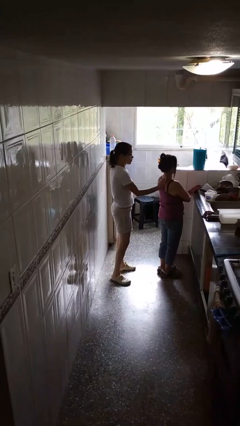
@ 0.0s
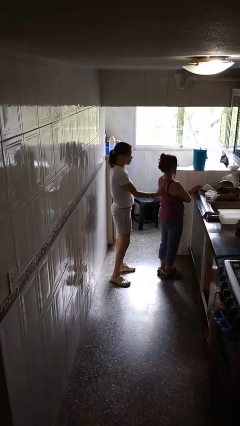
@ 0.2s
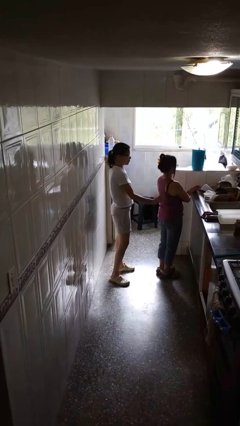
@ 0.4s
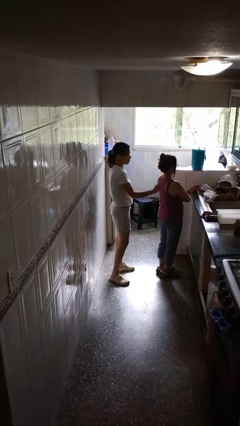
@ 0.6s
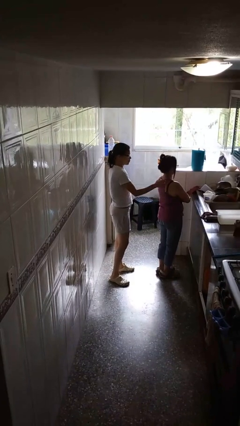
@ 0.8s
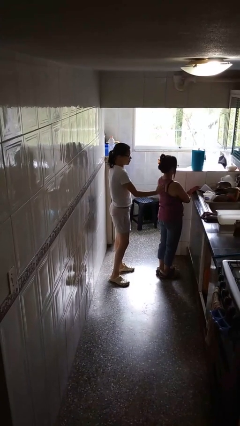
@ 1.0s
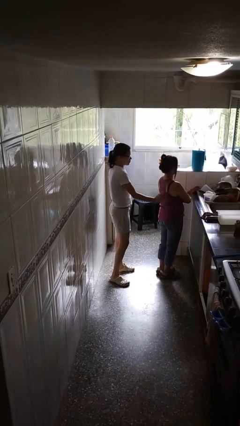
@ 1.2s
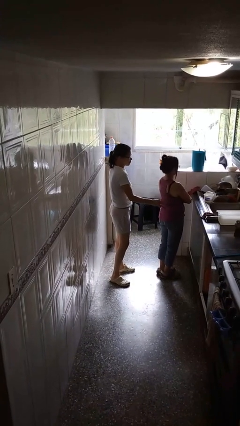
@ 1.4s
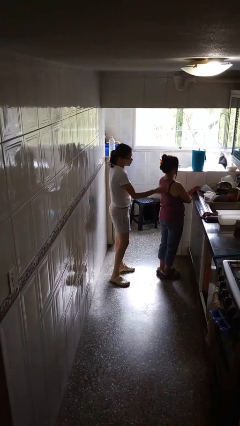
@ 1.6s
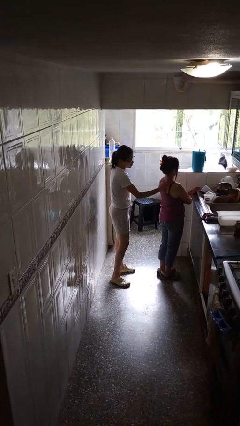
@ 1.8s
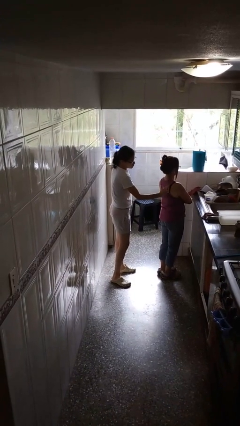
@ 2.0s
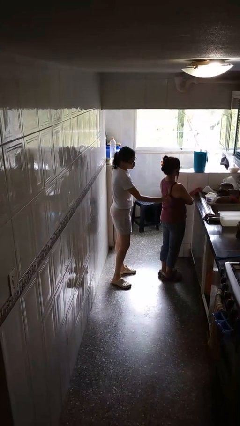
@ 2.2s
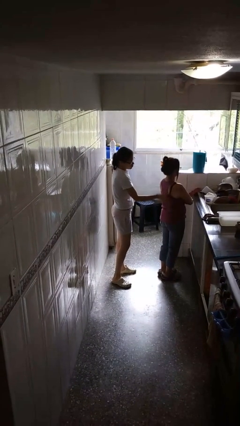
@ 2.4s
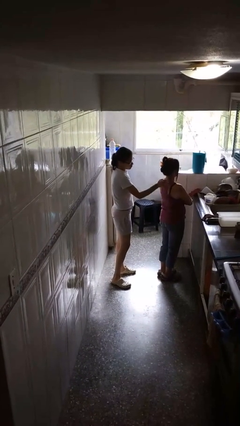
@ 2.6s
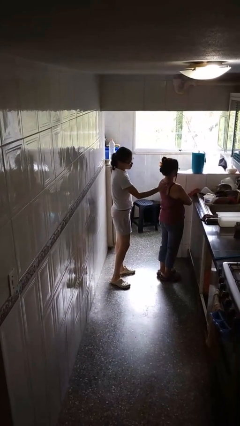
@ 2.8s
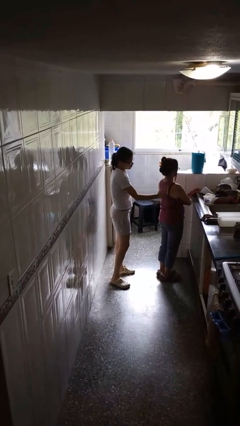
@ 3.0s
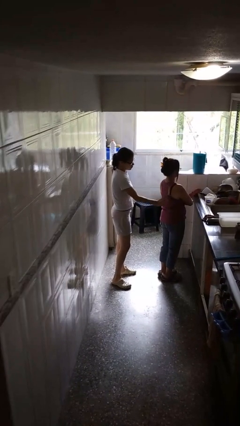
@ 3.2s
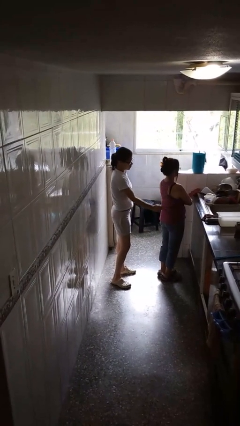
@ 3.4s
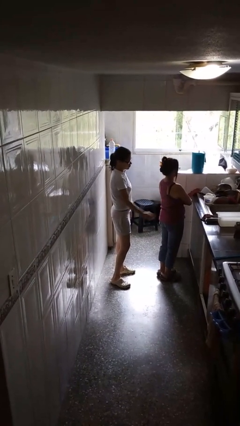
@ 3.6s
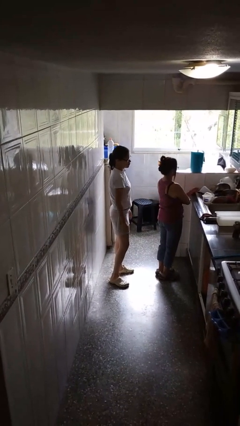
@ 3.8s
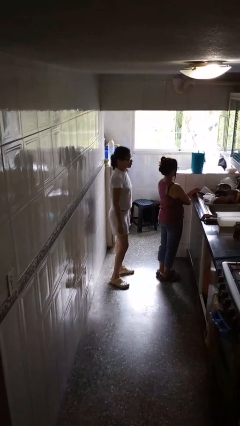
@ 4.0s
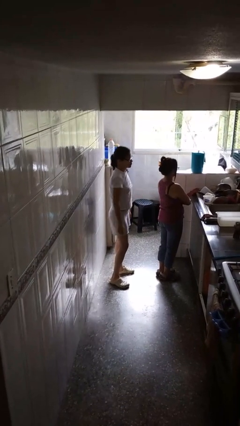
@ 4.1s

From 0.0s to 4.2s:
person touches back of person

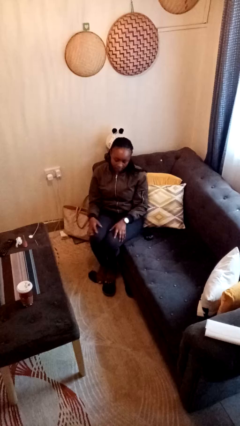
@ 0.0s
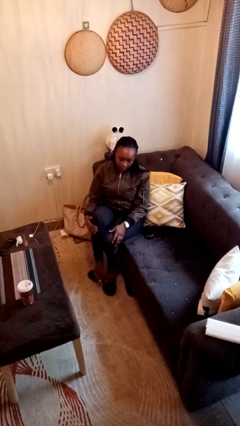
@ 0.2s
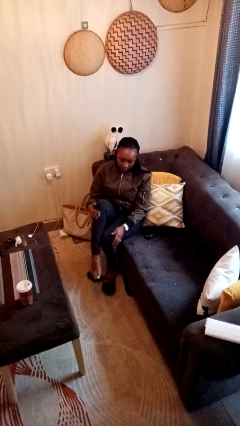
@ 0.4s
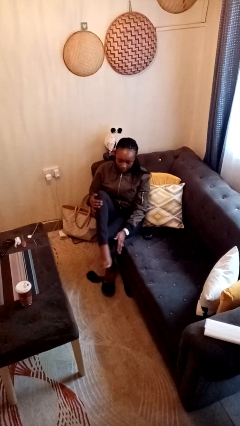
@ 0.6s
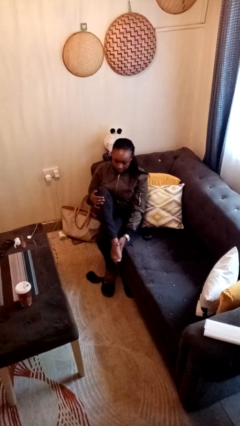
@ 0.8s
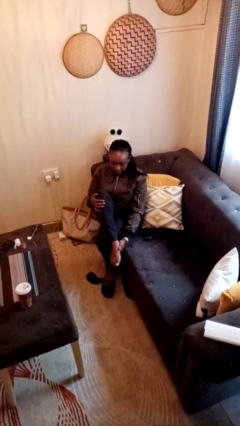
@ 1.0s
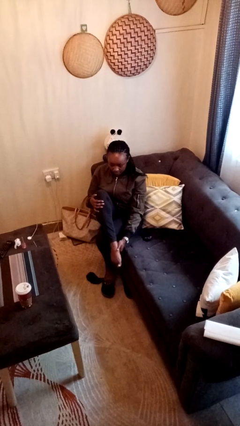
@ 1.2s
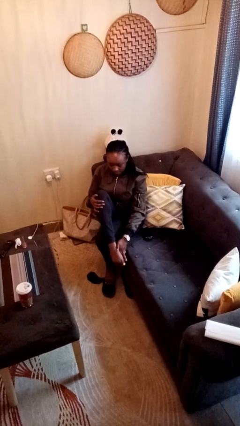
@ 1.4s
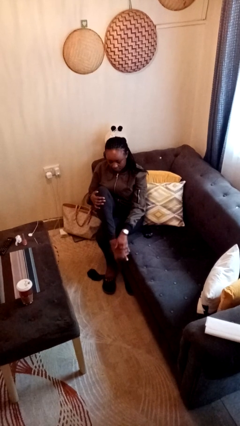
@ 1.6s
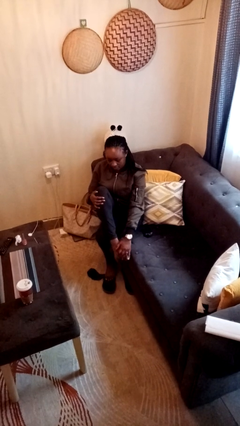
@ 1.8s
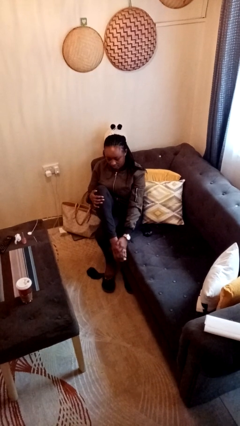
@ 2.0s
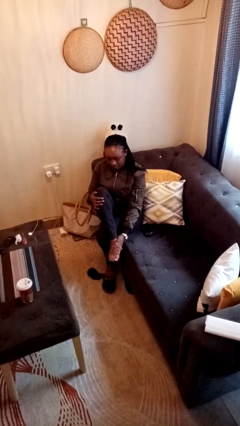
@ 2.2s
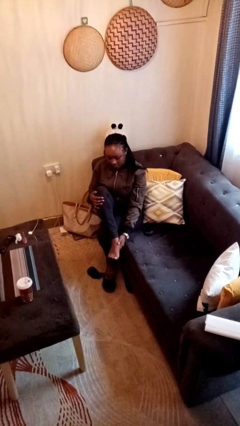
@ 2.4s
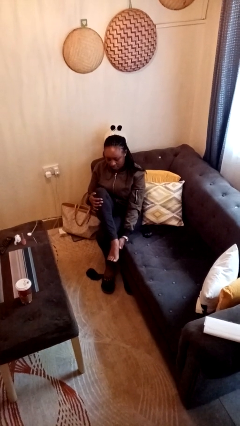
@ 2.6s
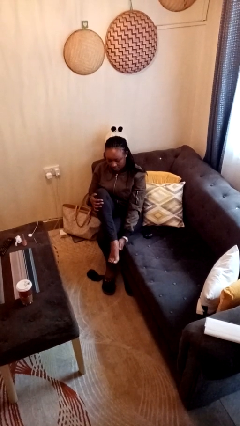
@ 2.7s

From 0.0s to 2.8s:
person rubs foot

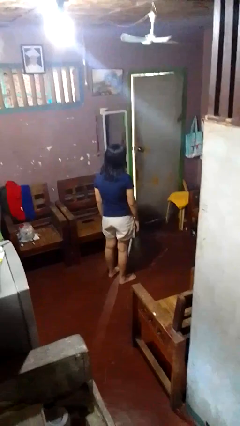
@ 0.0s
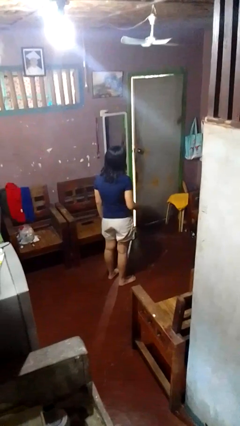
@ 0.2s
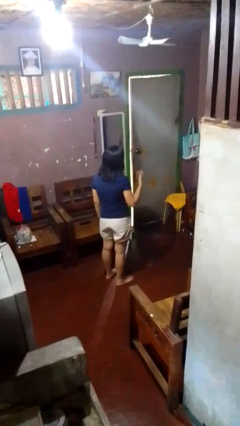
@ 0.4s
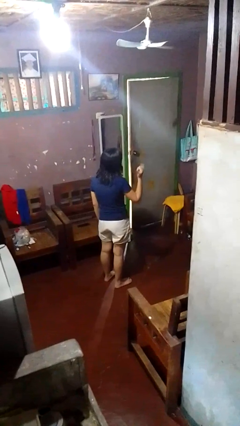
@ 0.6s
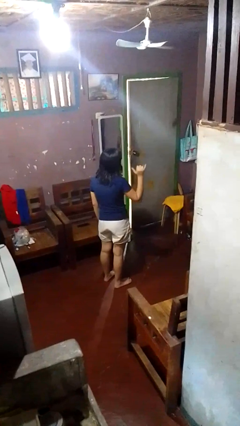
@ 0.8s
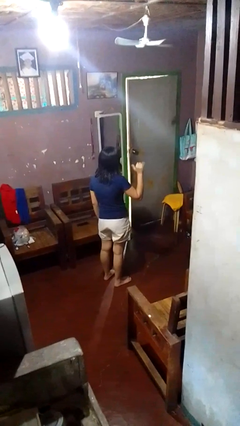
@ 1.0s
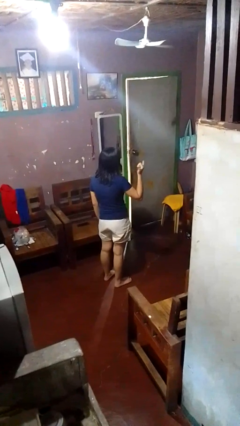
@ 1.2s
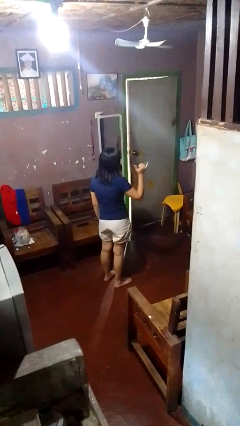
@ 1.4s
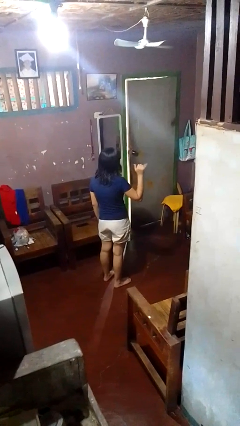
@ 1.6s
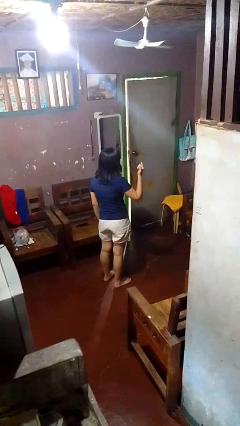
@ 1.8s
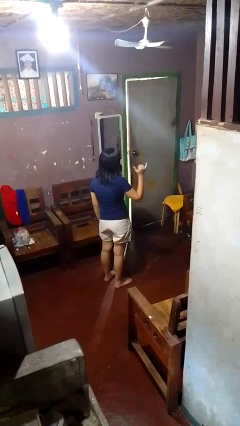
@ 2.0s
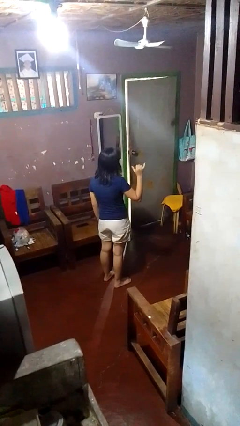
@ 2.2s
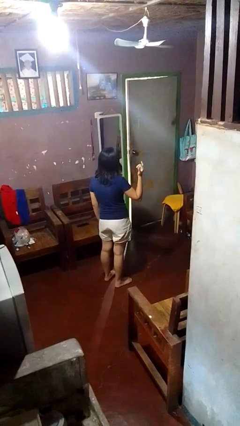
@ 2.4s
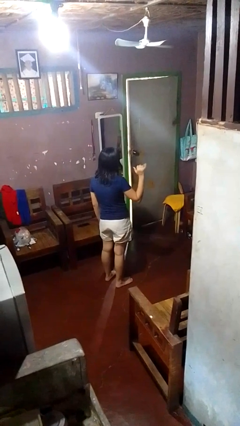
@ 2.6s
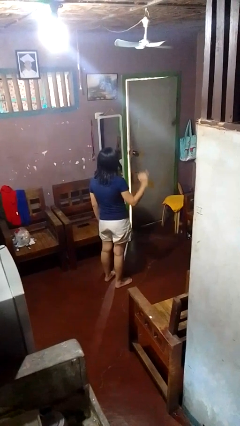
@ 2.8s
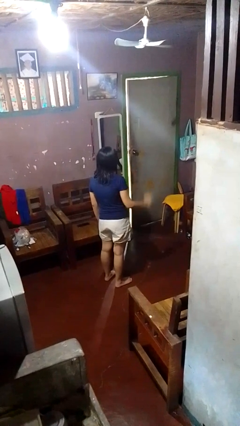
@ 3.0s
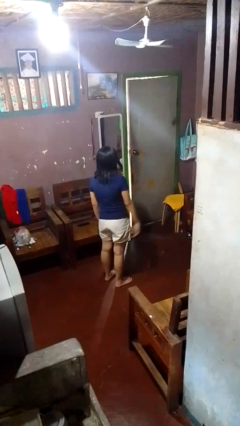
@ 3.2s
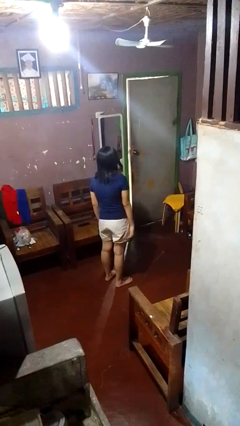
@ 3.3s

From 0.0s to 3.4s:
person gestures hang loose

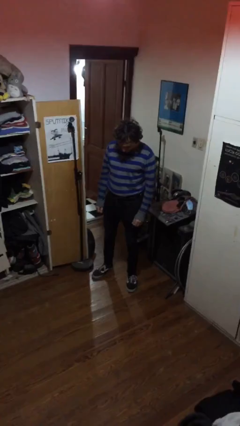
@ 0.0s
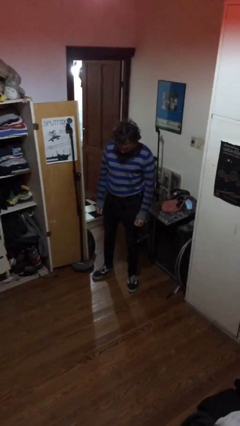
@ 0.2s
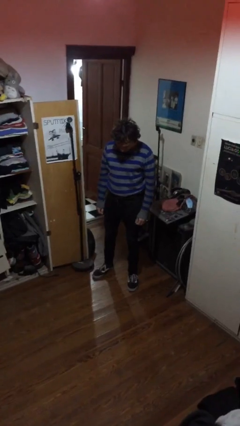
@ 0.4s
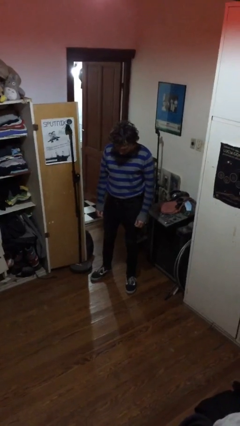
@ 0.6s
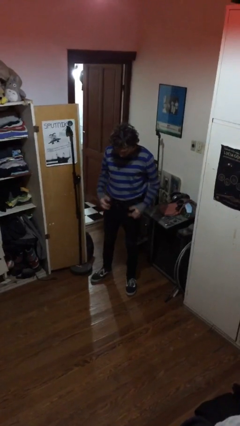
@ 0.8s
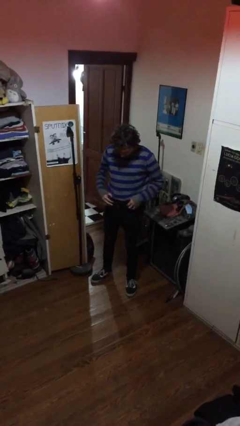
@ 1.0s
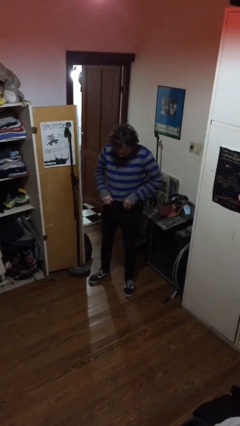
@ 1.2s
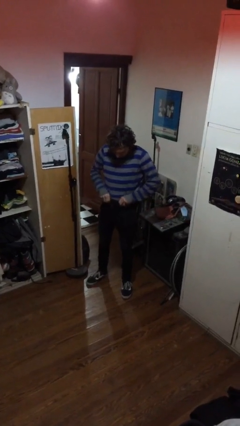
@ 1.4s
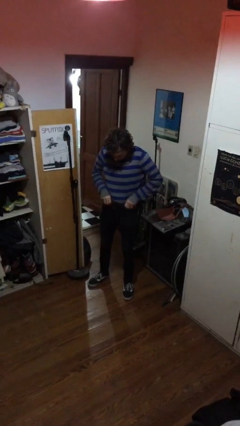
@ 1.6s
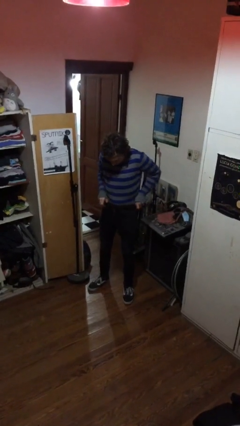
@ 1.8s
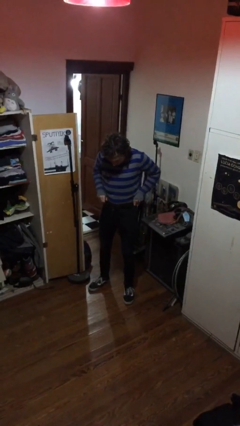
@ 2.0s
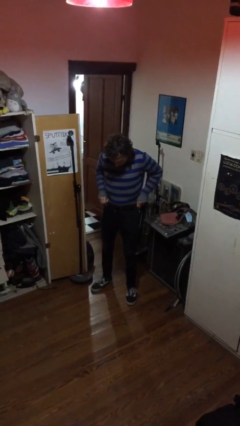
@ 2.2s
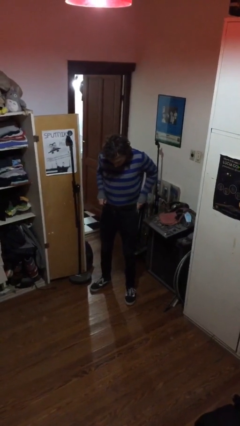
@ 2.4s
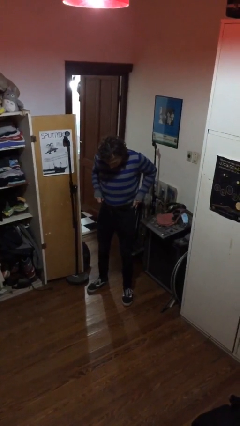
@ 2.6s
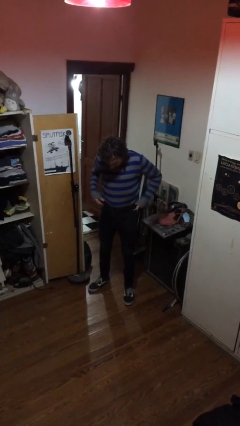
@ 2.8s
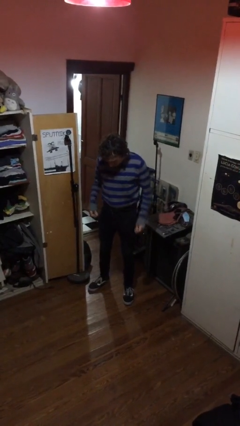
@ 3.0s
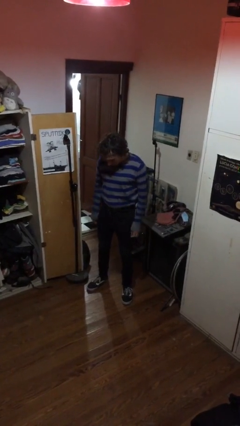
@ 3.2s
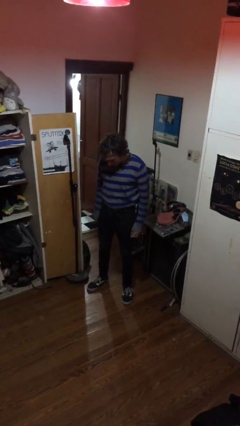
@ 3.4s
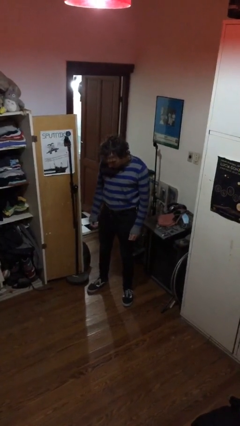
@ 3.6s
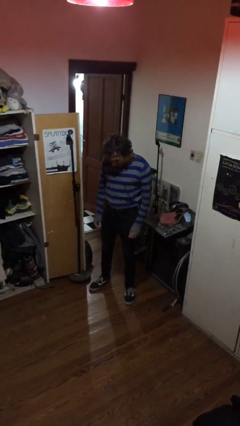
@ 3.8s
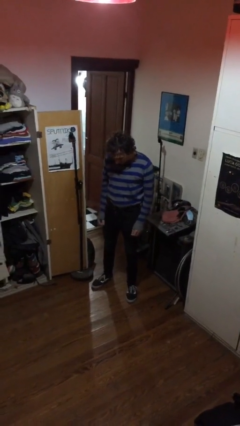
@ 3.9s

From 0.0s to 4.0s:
person hikes up pants

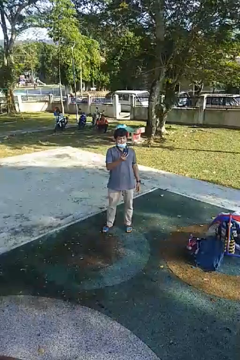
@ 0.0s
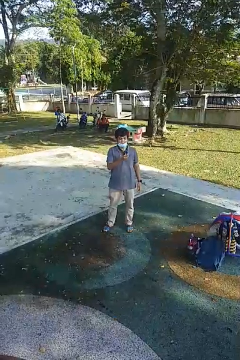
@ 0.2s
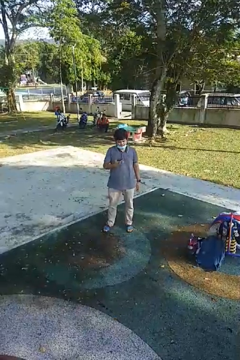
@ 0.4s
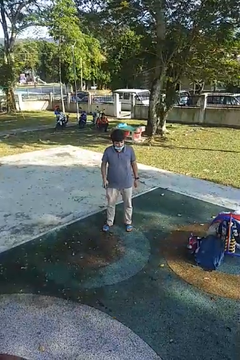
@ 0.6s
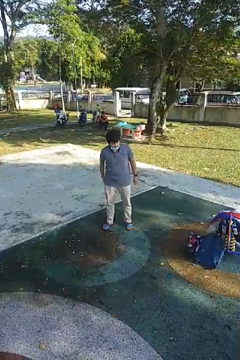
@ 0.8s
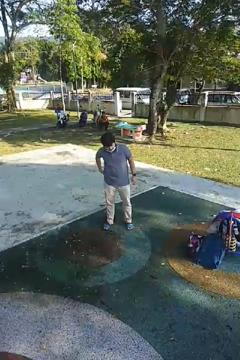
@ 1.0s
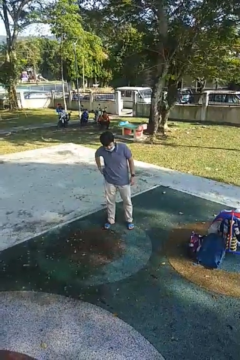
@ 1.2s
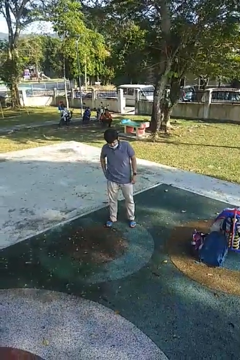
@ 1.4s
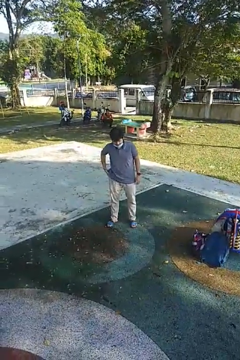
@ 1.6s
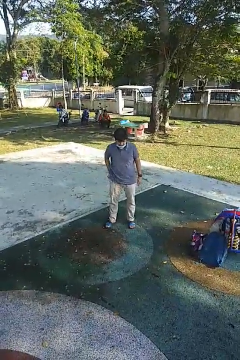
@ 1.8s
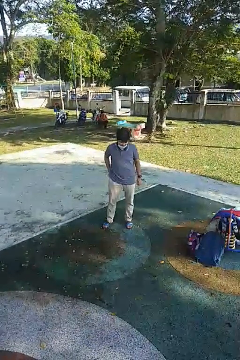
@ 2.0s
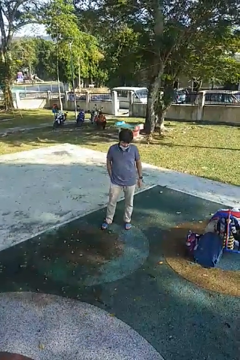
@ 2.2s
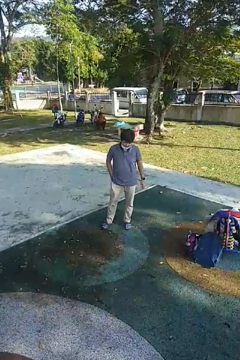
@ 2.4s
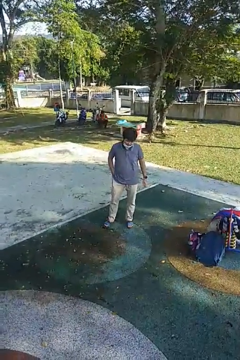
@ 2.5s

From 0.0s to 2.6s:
person puts phone into pocket

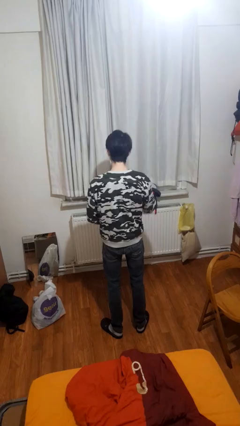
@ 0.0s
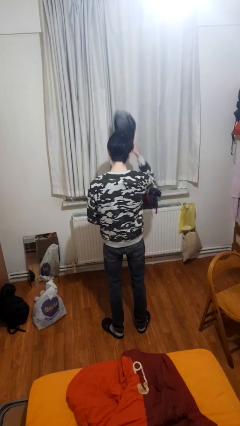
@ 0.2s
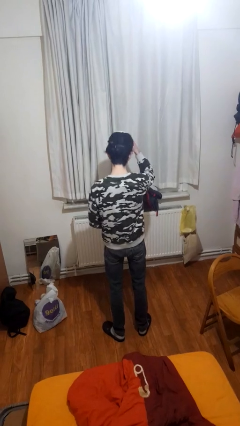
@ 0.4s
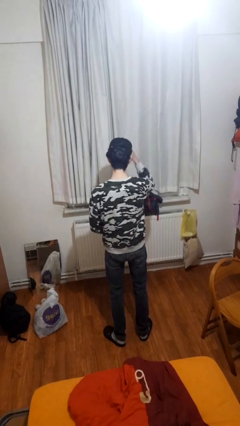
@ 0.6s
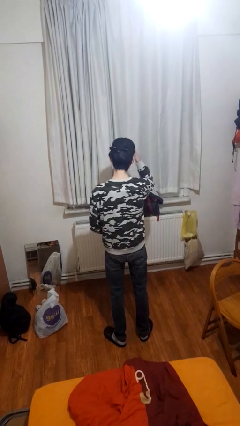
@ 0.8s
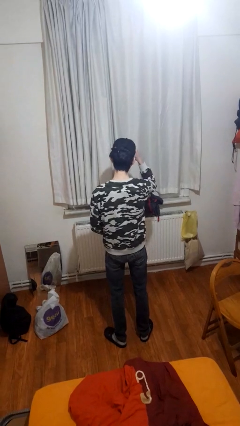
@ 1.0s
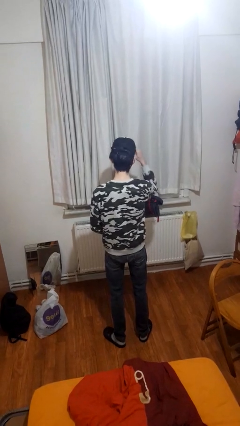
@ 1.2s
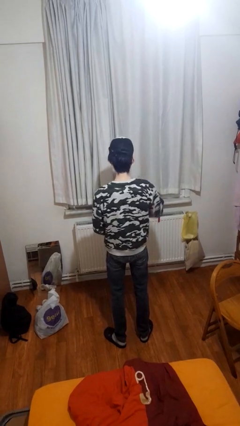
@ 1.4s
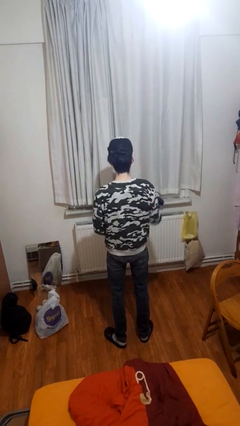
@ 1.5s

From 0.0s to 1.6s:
person puts on hat
